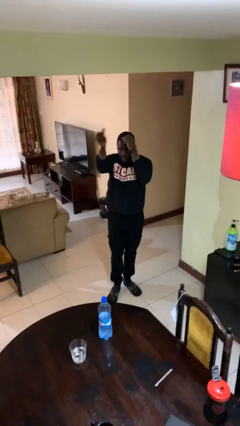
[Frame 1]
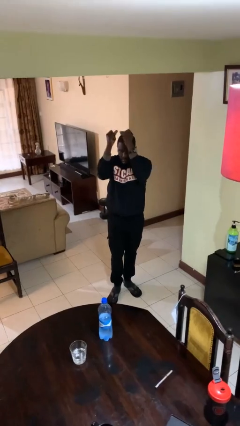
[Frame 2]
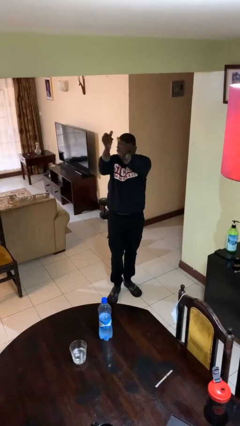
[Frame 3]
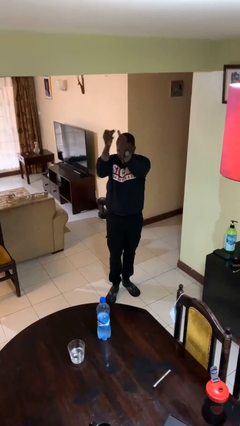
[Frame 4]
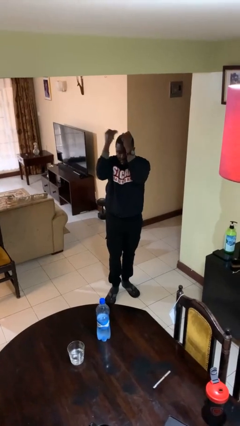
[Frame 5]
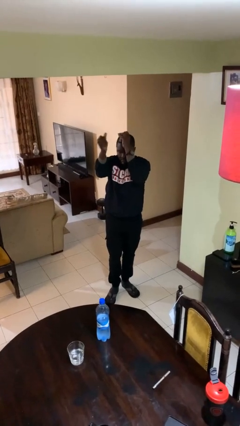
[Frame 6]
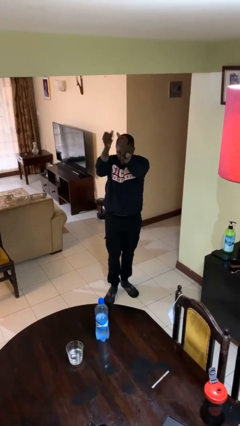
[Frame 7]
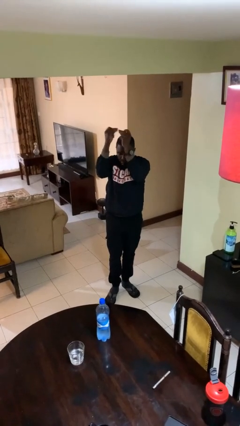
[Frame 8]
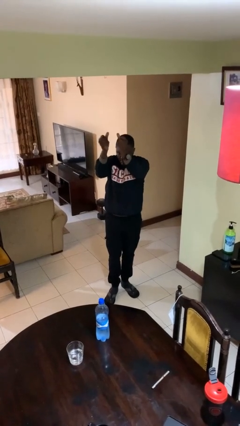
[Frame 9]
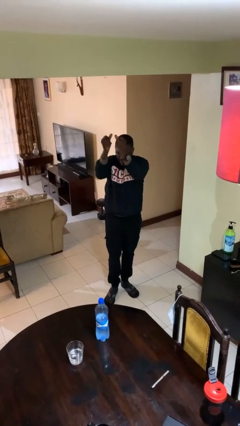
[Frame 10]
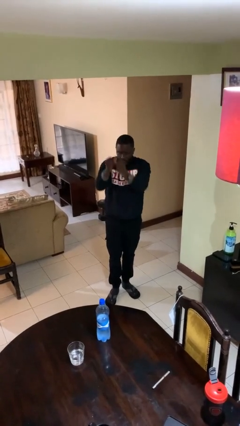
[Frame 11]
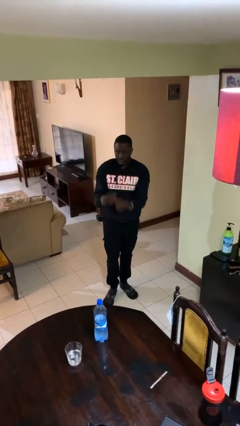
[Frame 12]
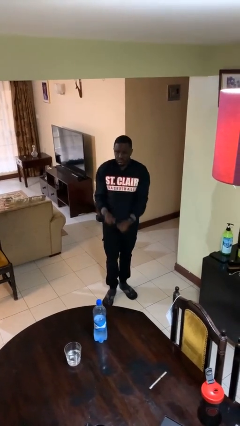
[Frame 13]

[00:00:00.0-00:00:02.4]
person snaps fingers

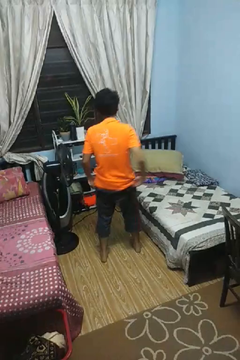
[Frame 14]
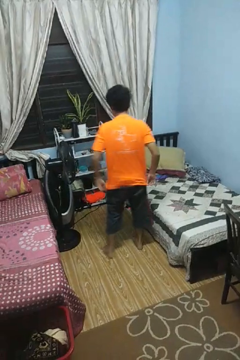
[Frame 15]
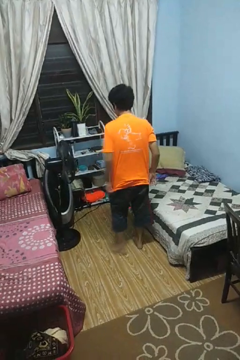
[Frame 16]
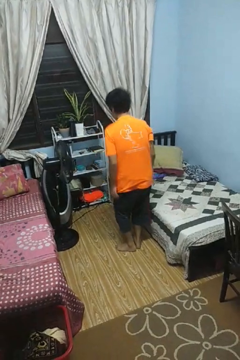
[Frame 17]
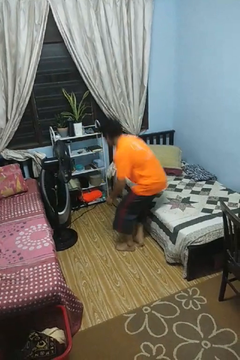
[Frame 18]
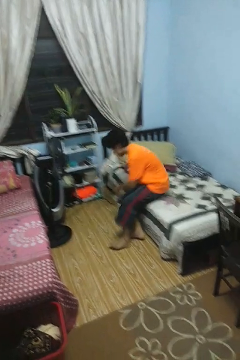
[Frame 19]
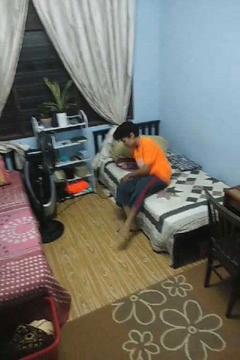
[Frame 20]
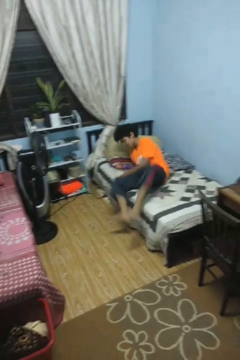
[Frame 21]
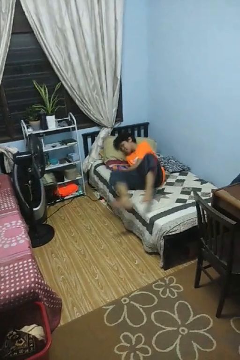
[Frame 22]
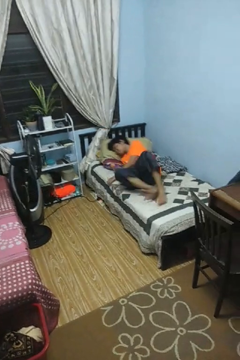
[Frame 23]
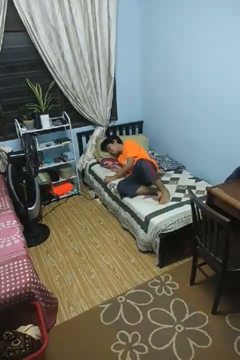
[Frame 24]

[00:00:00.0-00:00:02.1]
person lies down on bed

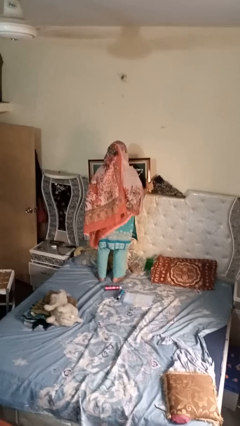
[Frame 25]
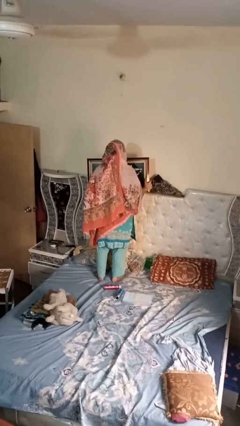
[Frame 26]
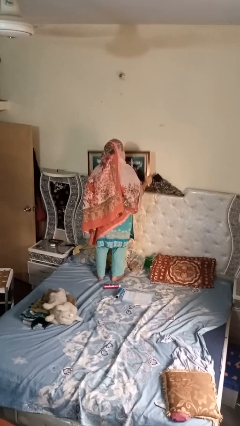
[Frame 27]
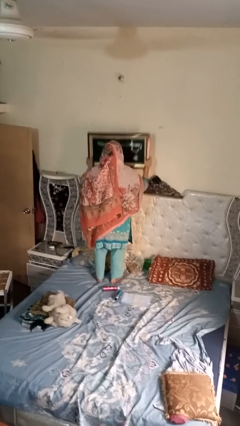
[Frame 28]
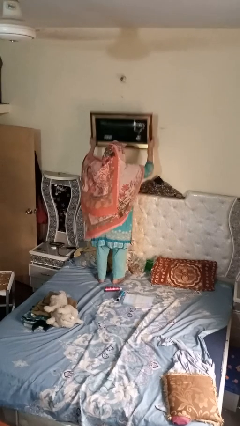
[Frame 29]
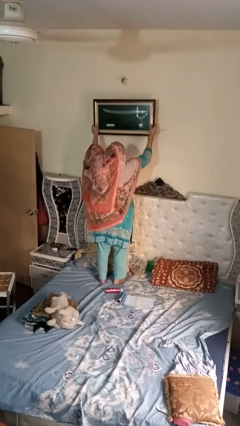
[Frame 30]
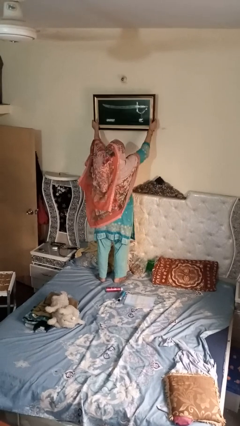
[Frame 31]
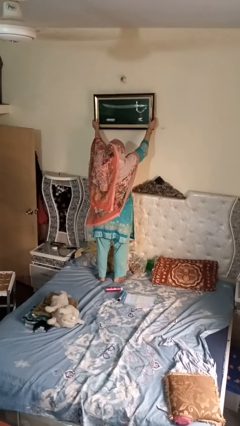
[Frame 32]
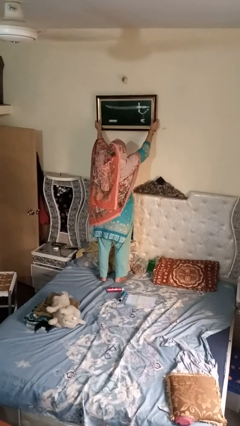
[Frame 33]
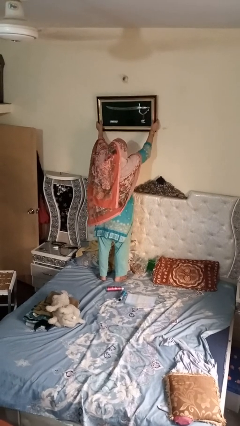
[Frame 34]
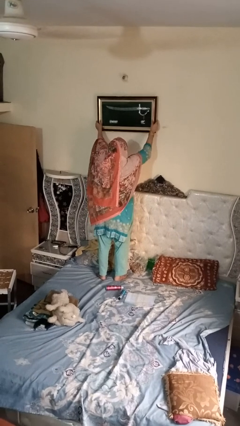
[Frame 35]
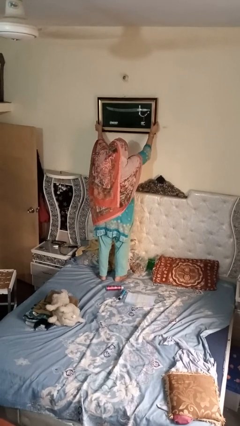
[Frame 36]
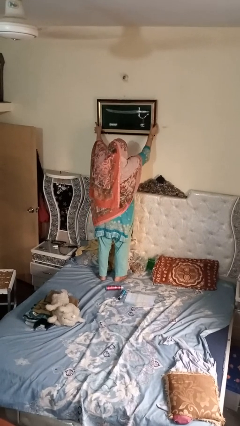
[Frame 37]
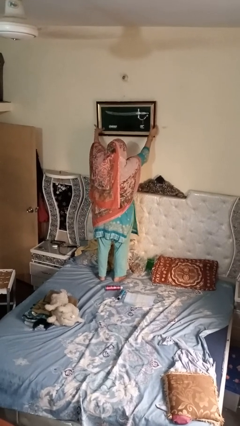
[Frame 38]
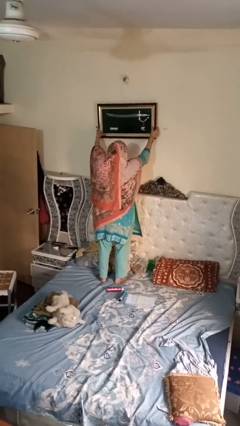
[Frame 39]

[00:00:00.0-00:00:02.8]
person takes down picture frame

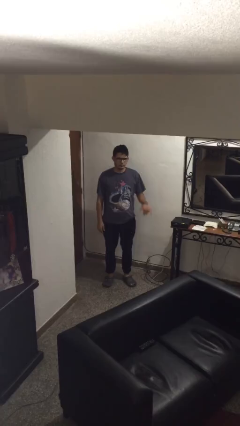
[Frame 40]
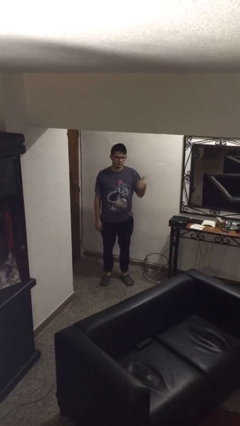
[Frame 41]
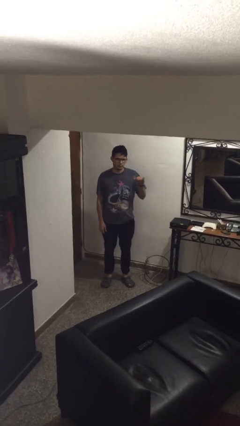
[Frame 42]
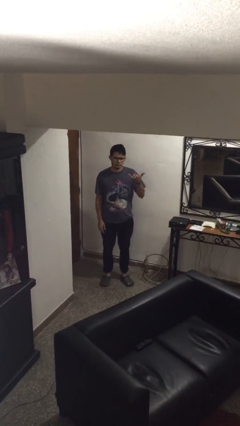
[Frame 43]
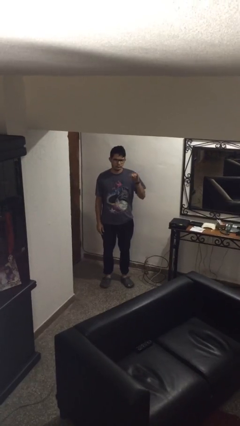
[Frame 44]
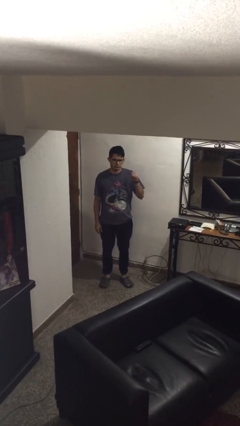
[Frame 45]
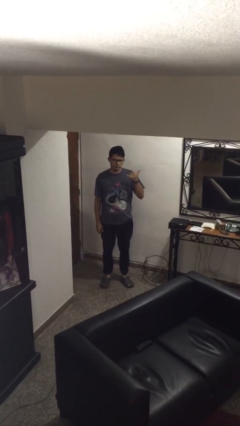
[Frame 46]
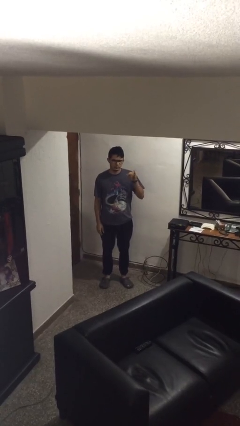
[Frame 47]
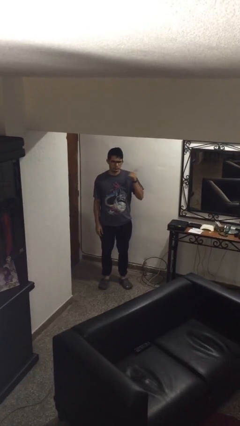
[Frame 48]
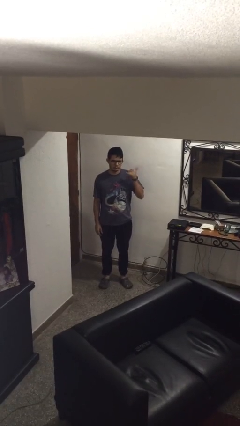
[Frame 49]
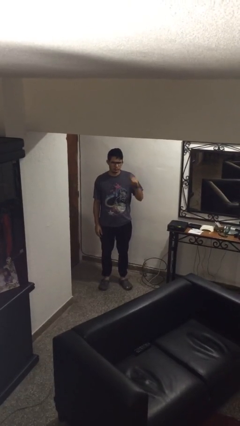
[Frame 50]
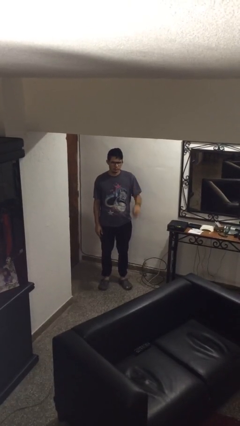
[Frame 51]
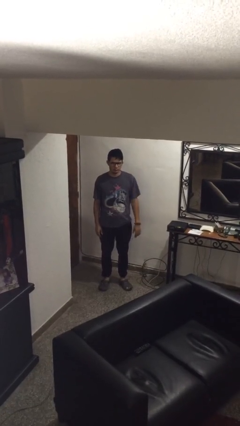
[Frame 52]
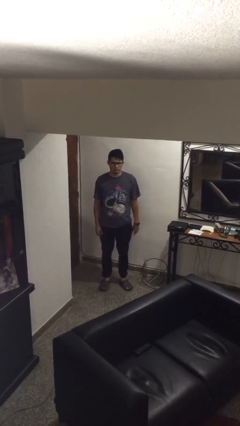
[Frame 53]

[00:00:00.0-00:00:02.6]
person gestures hang loose

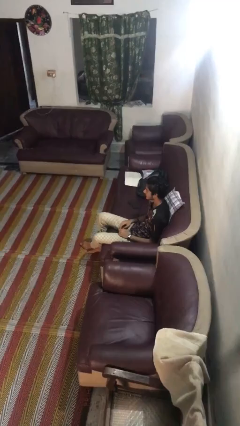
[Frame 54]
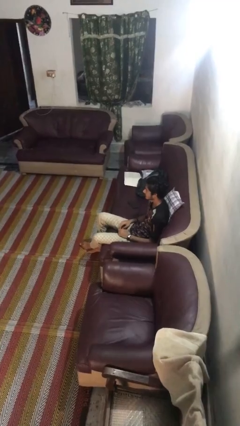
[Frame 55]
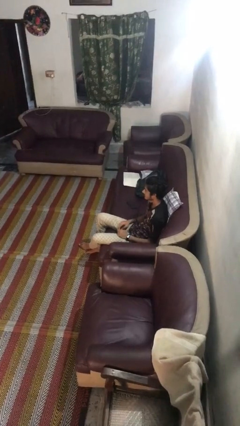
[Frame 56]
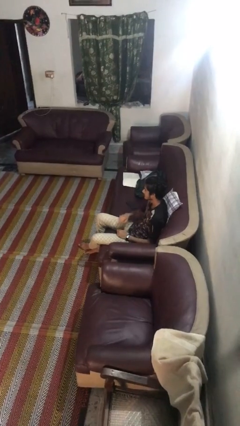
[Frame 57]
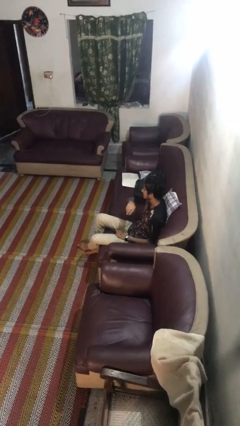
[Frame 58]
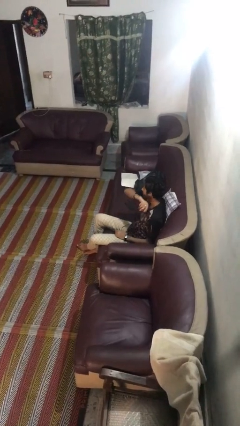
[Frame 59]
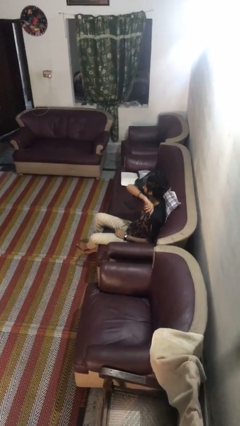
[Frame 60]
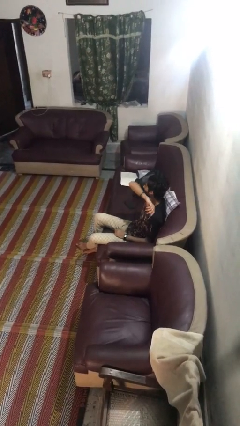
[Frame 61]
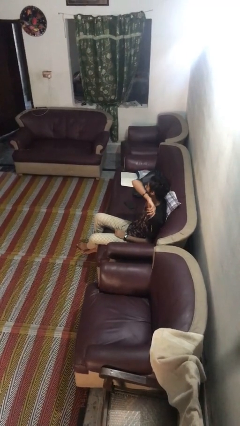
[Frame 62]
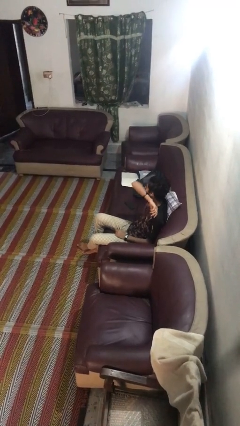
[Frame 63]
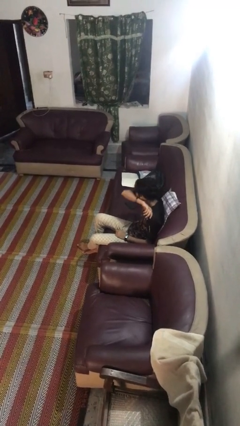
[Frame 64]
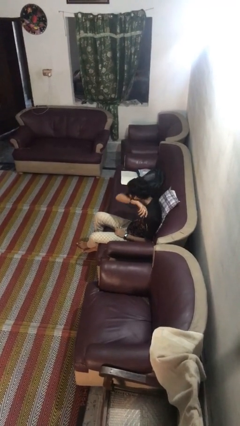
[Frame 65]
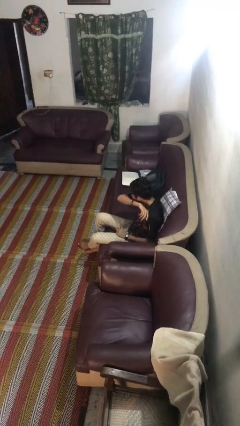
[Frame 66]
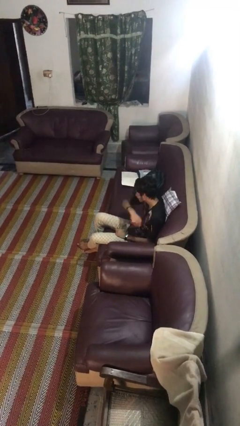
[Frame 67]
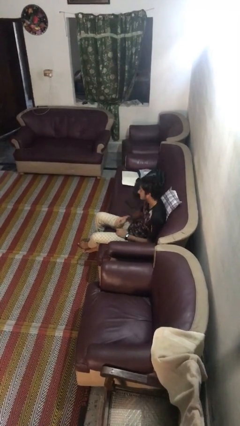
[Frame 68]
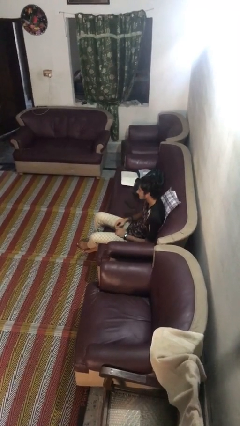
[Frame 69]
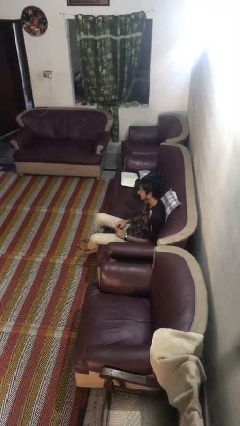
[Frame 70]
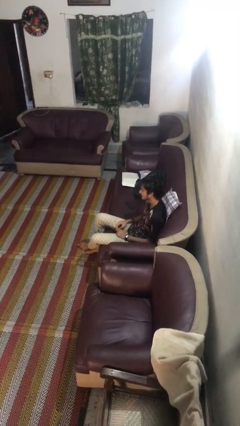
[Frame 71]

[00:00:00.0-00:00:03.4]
person sneezes into arm

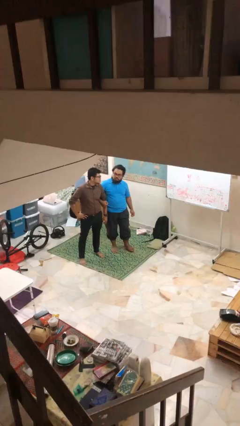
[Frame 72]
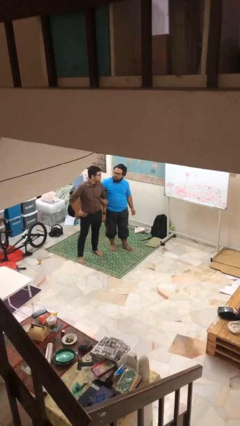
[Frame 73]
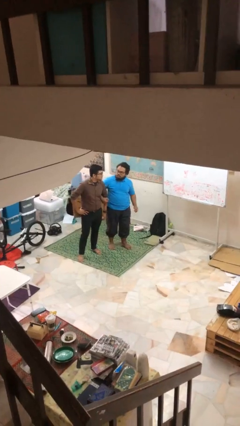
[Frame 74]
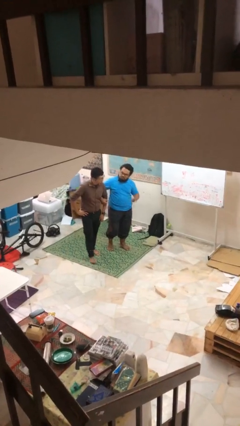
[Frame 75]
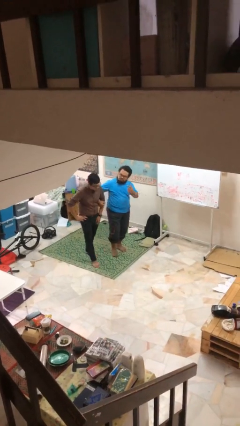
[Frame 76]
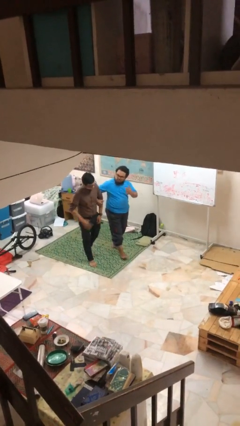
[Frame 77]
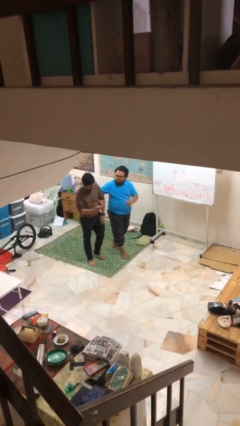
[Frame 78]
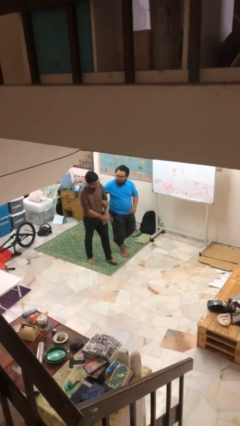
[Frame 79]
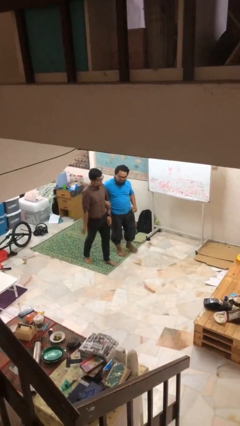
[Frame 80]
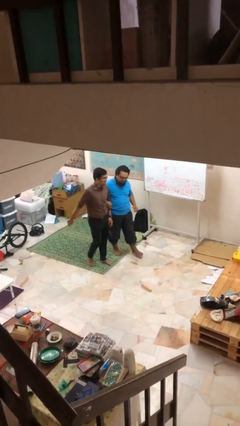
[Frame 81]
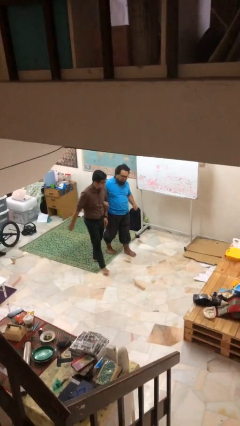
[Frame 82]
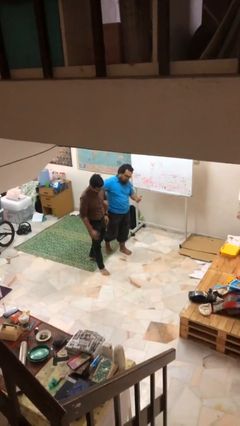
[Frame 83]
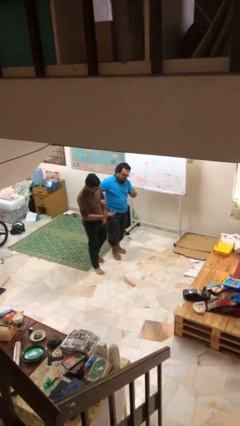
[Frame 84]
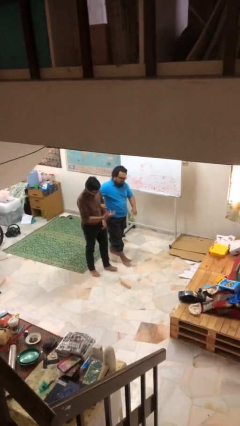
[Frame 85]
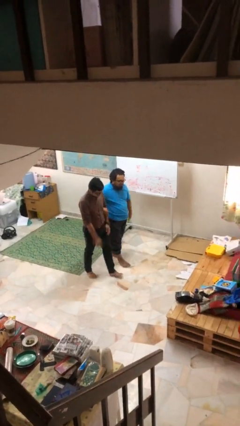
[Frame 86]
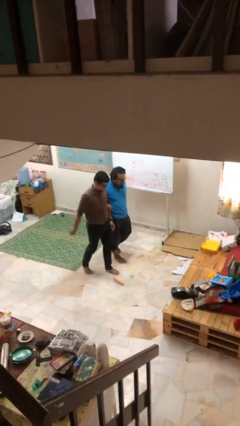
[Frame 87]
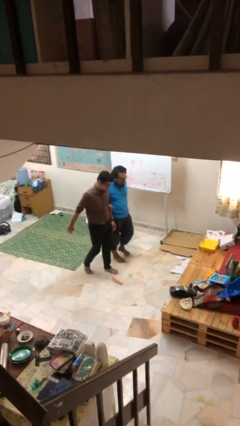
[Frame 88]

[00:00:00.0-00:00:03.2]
person holds hand

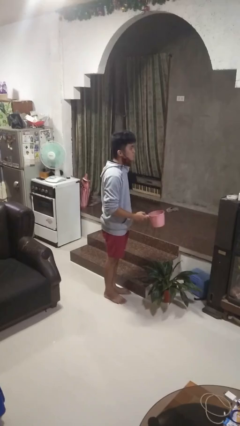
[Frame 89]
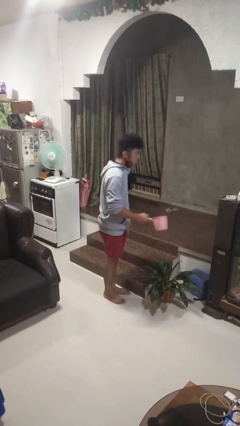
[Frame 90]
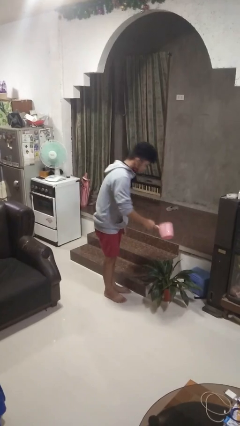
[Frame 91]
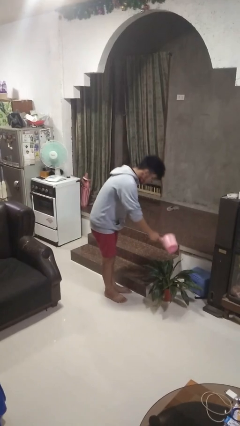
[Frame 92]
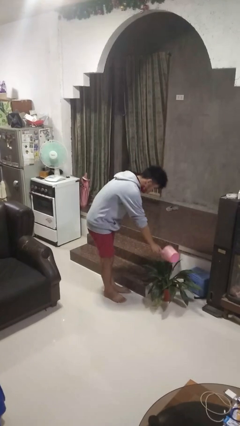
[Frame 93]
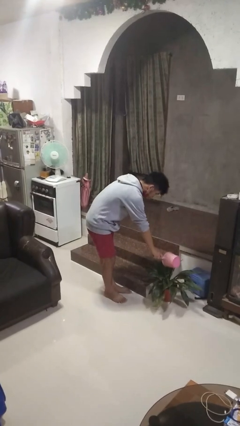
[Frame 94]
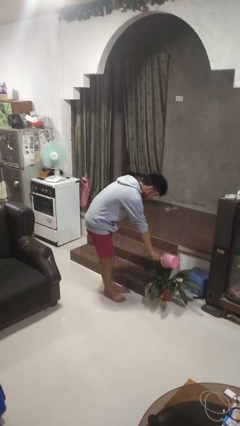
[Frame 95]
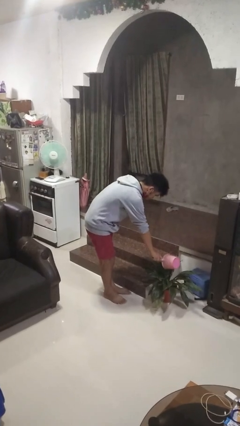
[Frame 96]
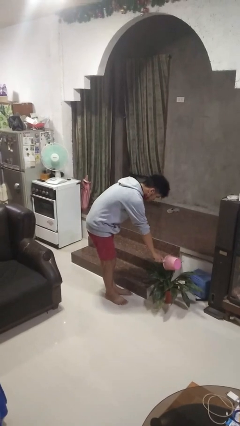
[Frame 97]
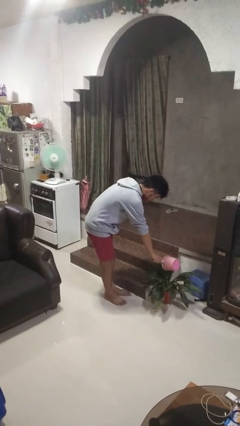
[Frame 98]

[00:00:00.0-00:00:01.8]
person waters houseplant
